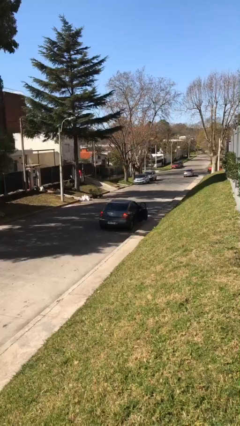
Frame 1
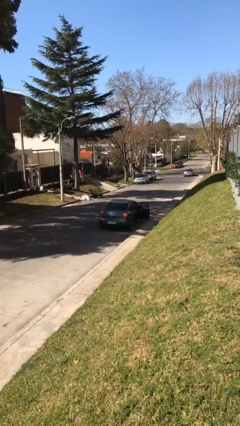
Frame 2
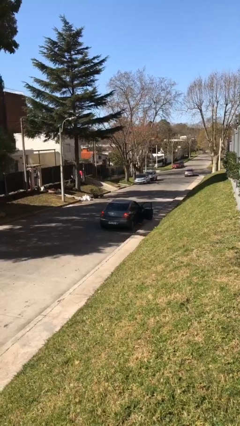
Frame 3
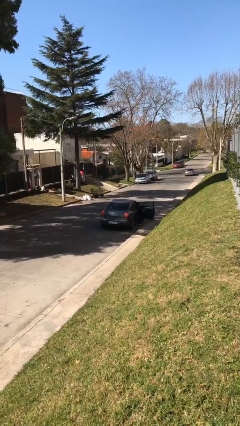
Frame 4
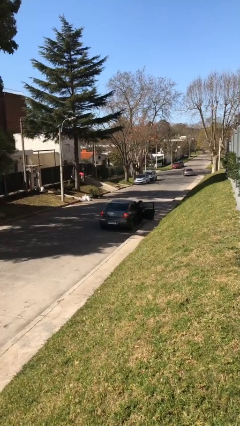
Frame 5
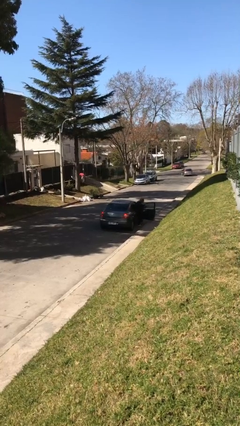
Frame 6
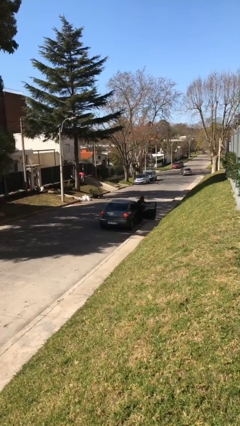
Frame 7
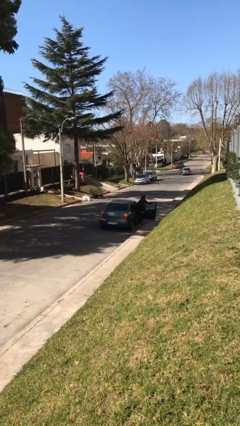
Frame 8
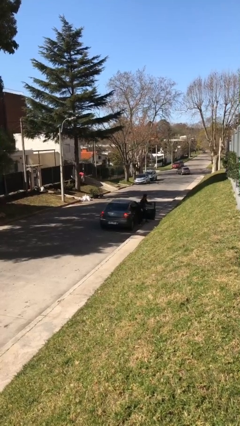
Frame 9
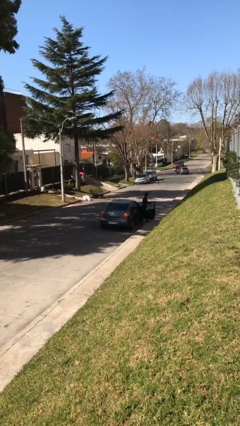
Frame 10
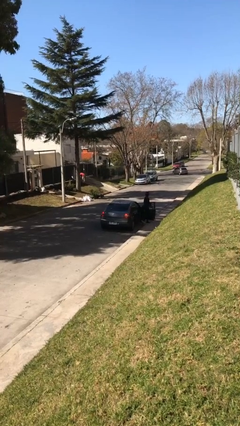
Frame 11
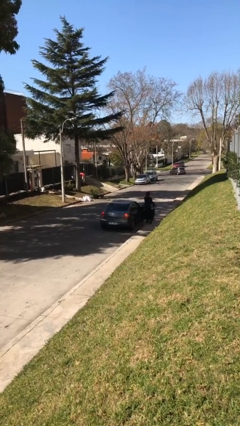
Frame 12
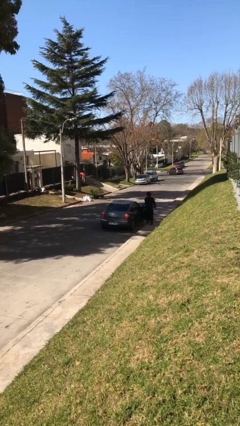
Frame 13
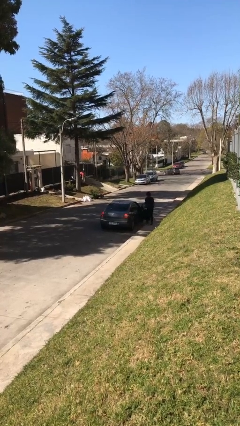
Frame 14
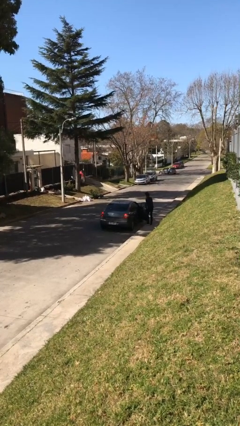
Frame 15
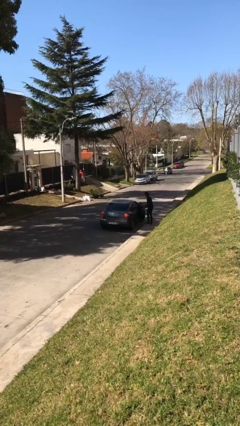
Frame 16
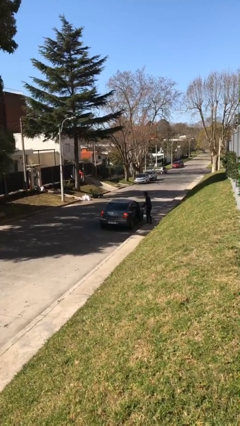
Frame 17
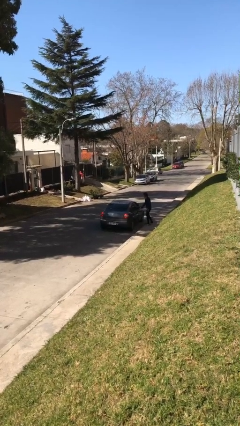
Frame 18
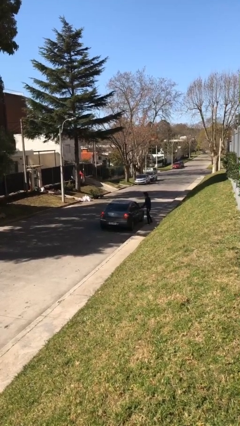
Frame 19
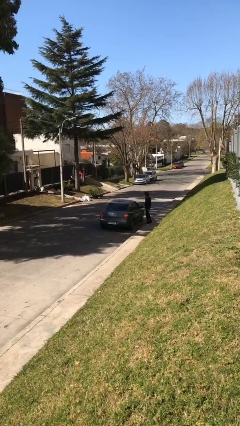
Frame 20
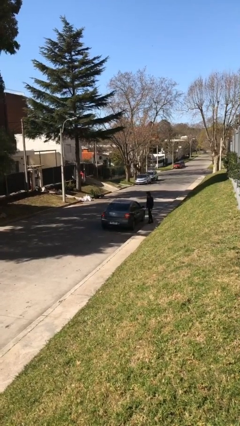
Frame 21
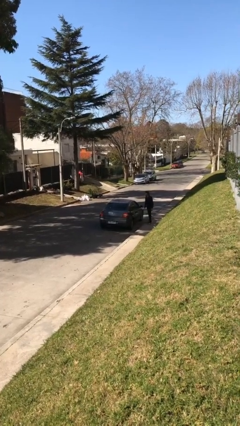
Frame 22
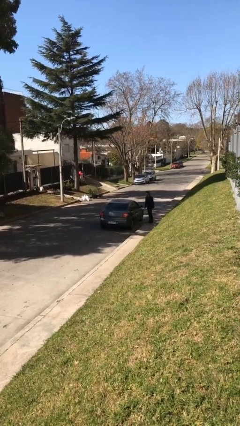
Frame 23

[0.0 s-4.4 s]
car drops off person

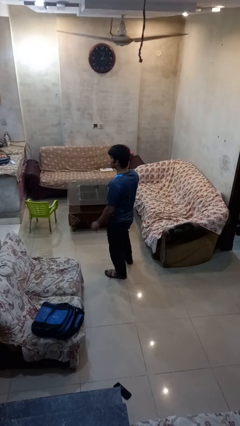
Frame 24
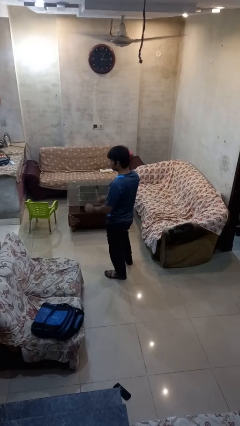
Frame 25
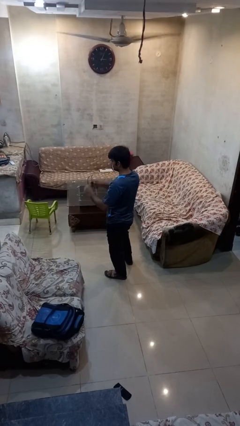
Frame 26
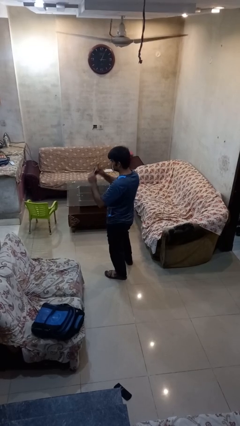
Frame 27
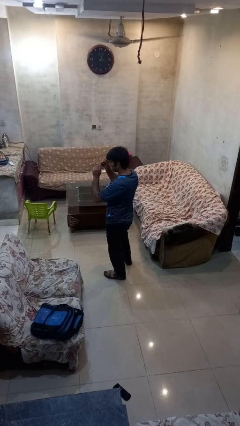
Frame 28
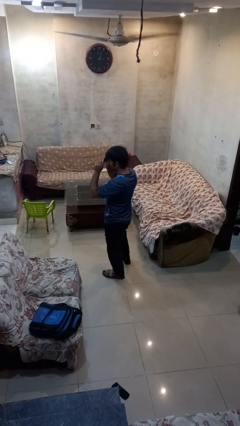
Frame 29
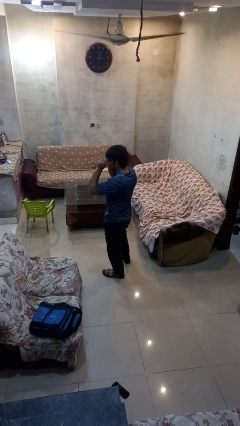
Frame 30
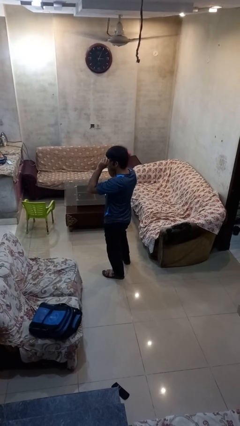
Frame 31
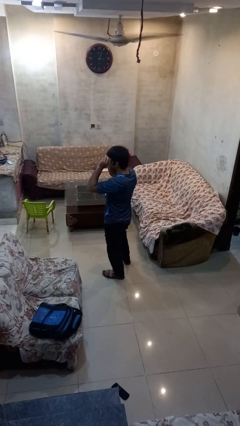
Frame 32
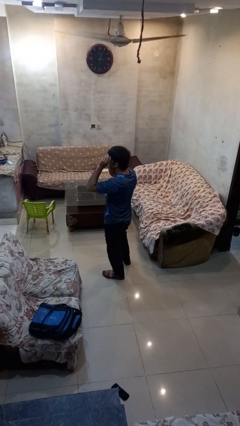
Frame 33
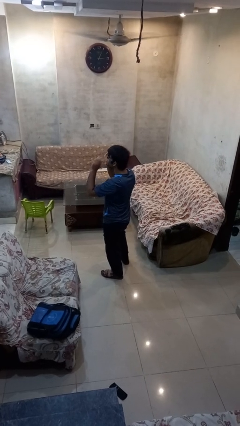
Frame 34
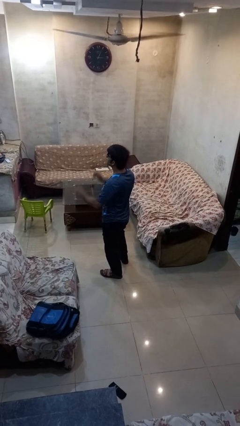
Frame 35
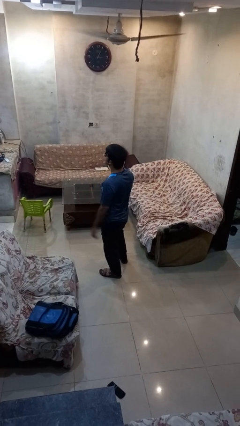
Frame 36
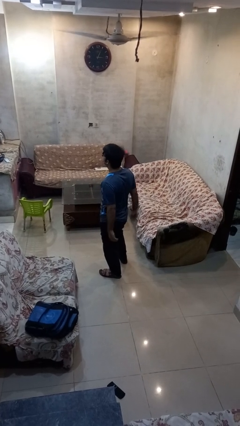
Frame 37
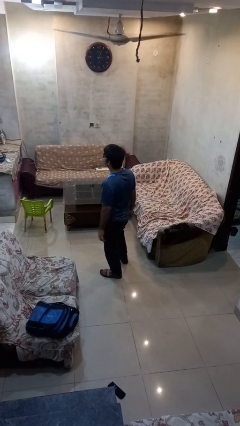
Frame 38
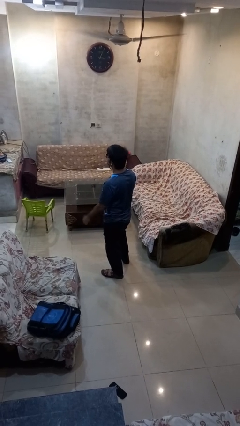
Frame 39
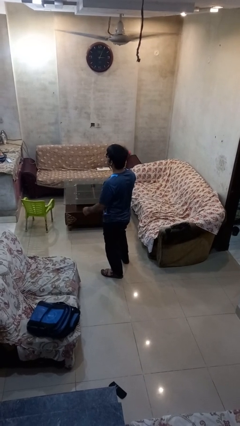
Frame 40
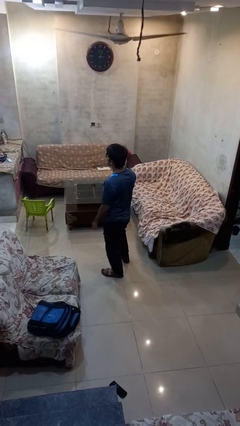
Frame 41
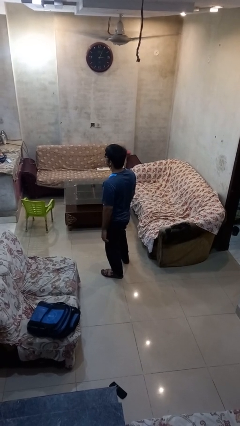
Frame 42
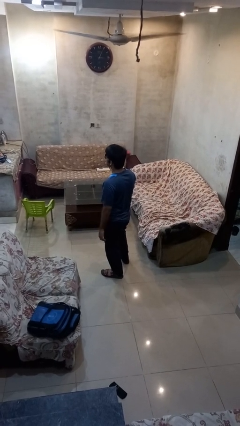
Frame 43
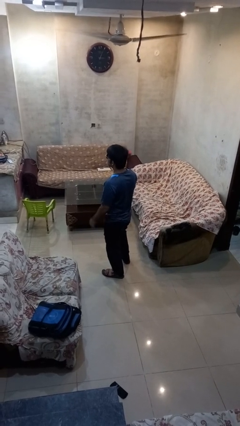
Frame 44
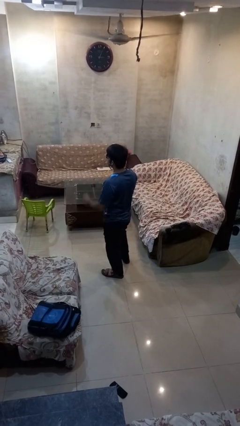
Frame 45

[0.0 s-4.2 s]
person puts on sunglasses

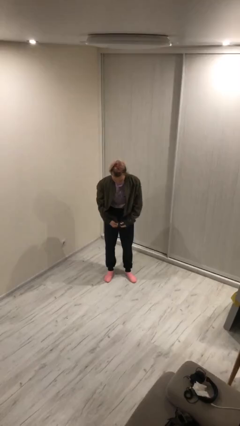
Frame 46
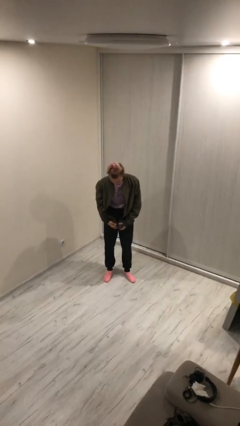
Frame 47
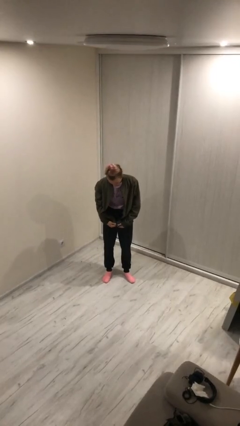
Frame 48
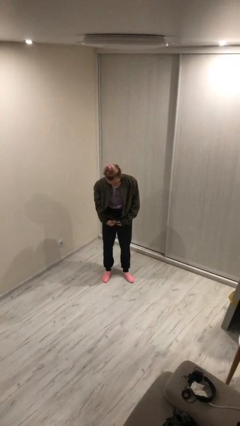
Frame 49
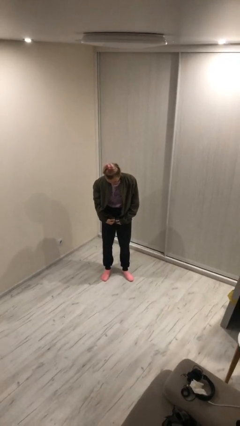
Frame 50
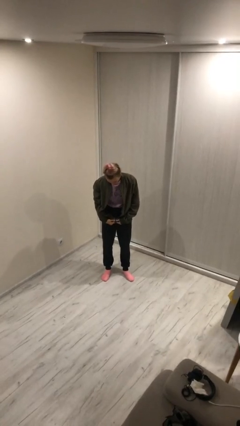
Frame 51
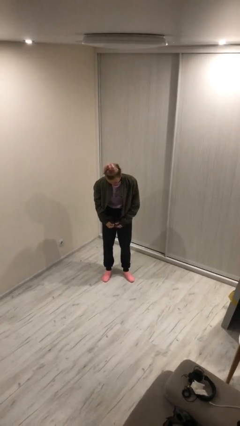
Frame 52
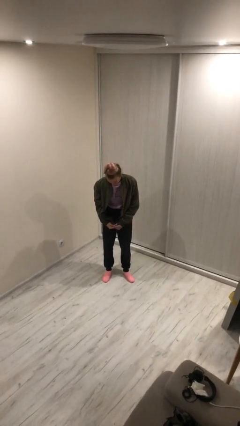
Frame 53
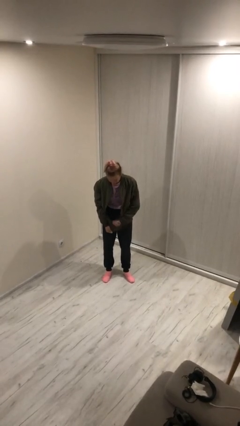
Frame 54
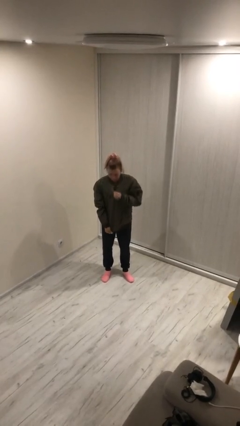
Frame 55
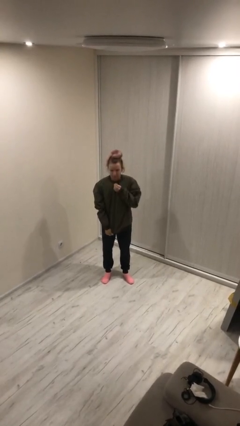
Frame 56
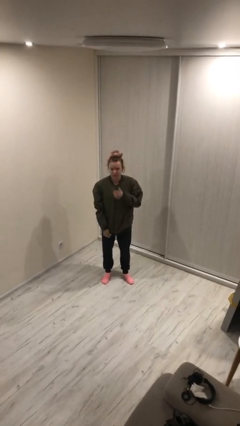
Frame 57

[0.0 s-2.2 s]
person zips up jacket

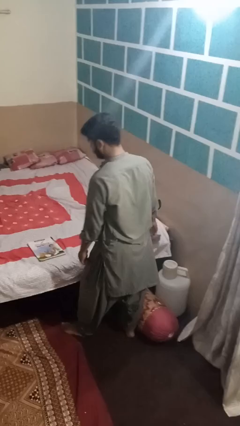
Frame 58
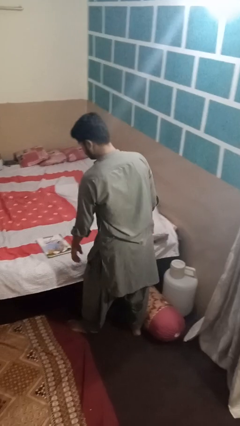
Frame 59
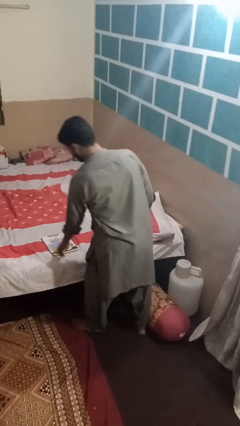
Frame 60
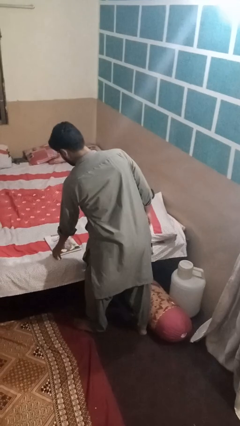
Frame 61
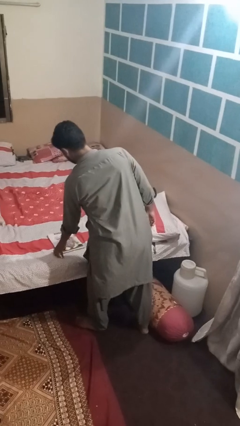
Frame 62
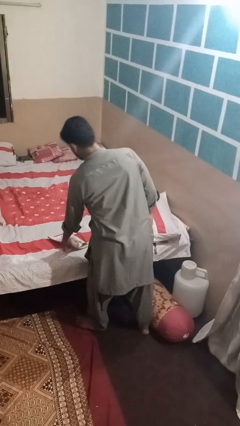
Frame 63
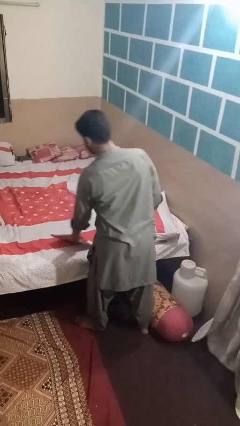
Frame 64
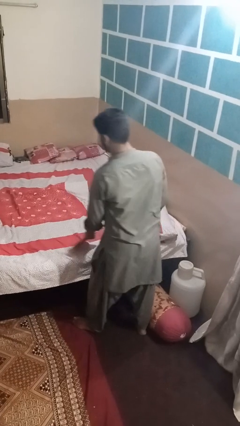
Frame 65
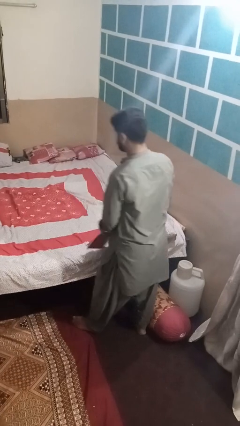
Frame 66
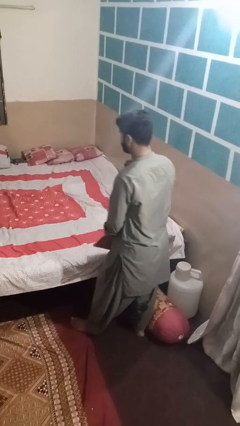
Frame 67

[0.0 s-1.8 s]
person picks up object from bed

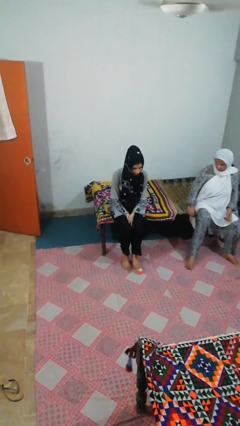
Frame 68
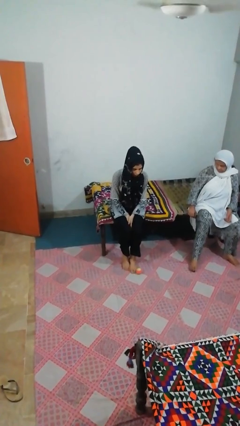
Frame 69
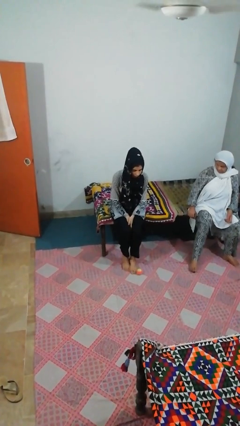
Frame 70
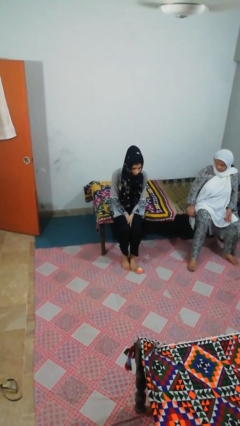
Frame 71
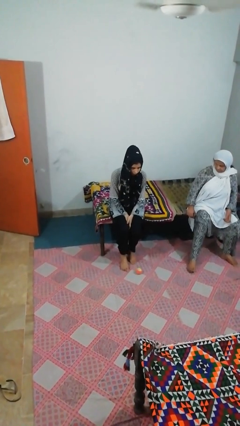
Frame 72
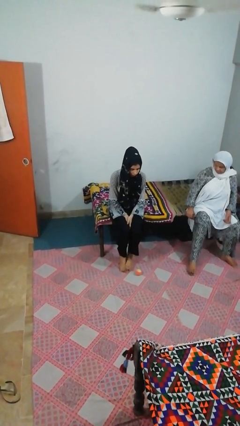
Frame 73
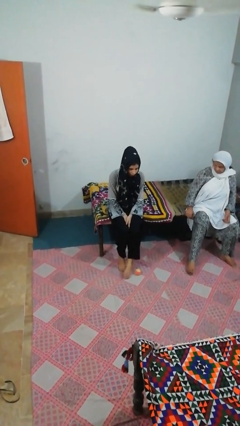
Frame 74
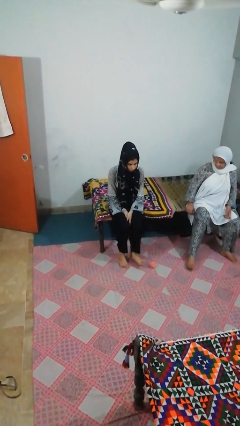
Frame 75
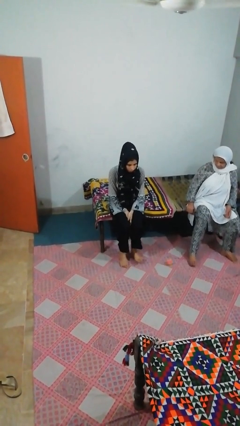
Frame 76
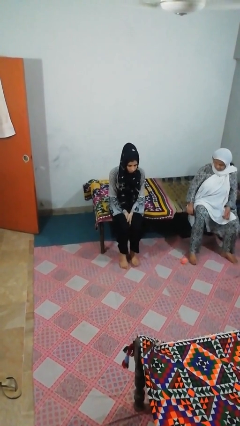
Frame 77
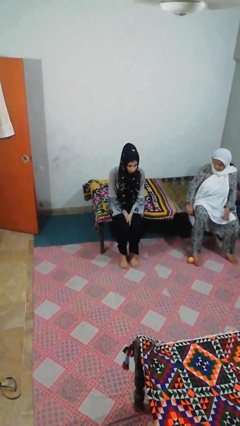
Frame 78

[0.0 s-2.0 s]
person kicks object to person

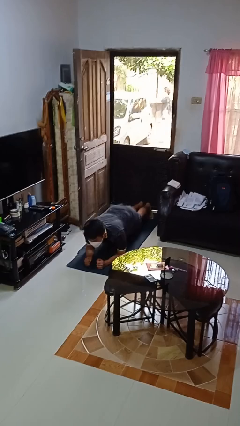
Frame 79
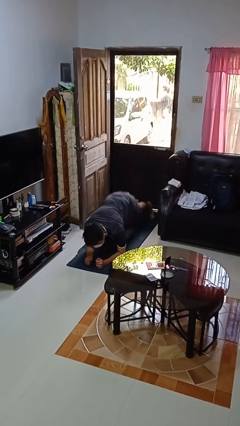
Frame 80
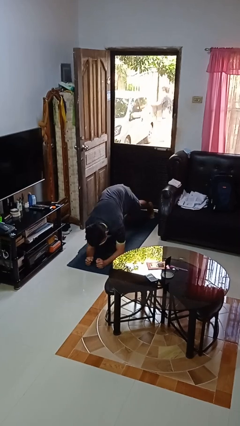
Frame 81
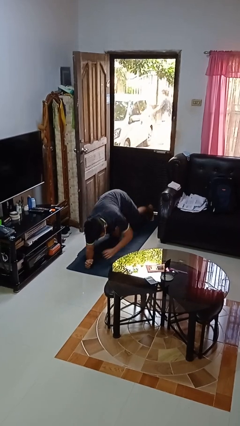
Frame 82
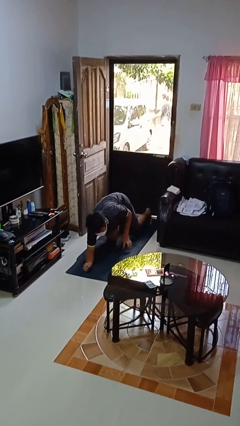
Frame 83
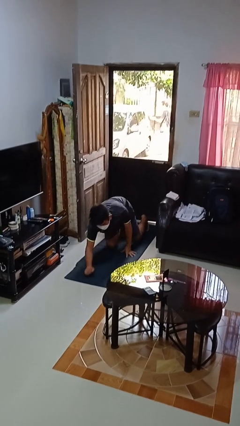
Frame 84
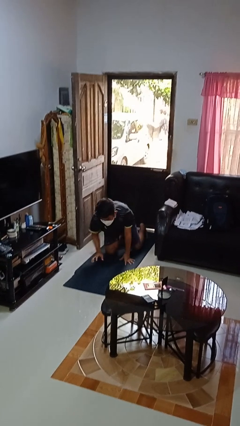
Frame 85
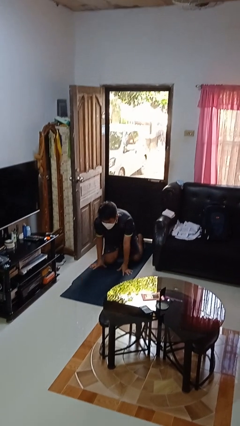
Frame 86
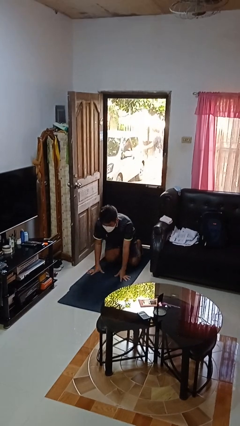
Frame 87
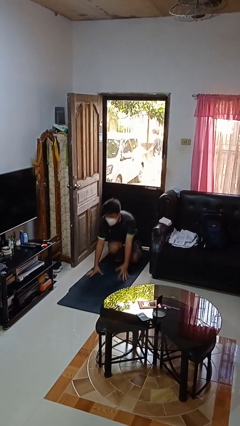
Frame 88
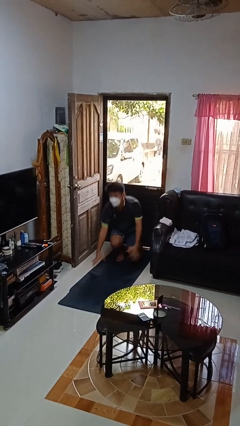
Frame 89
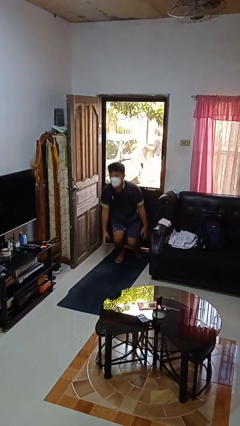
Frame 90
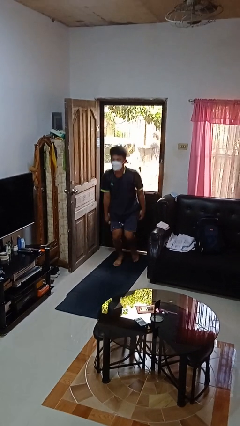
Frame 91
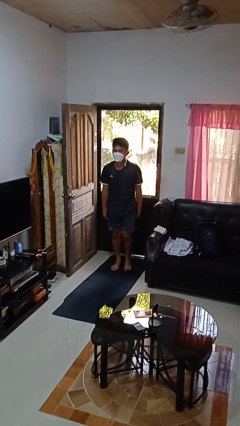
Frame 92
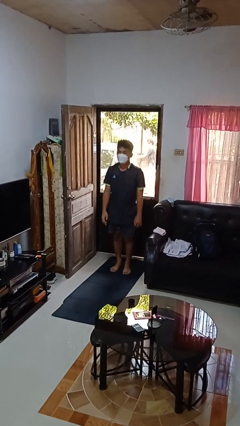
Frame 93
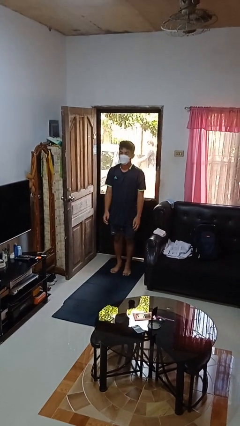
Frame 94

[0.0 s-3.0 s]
person stands up from floor
